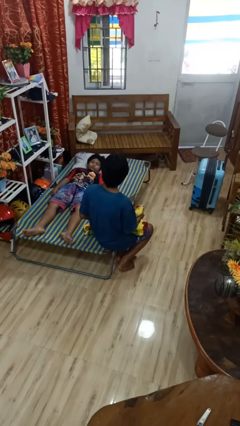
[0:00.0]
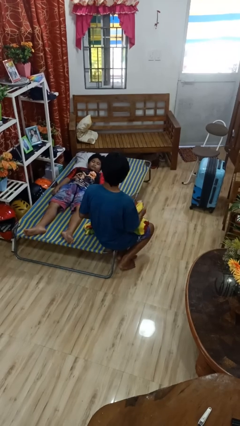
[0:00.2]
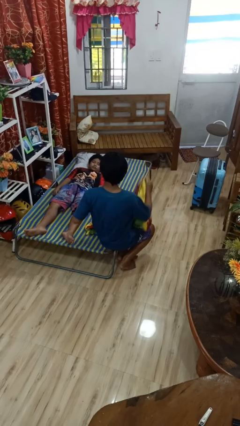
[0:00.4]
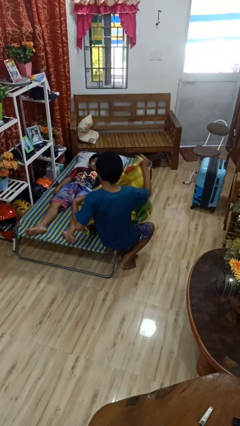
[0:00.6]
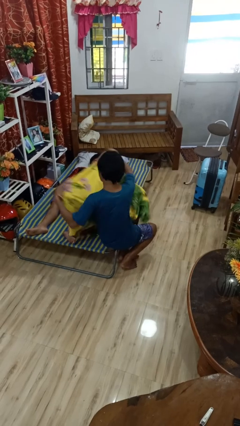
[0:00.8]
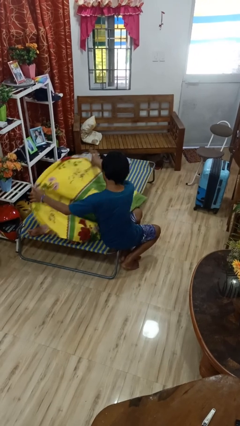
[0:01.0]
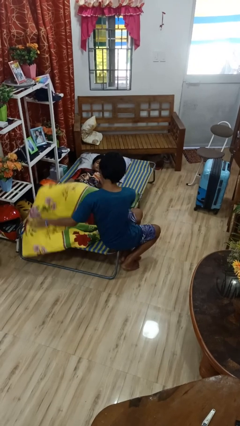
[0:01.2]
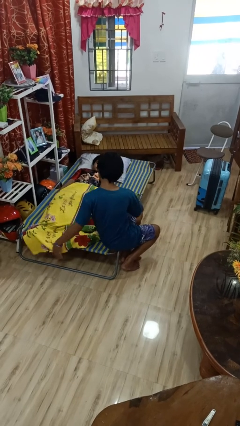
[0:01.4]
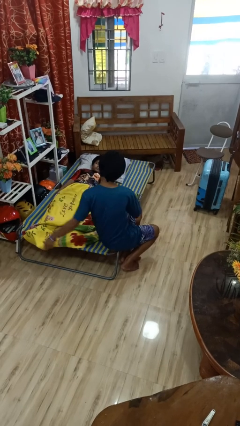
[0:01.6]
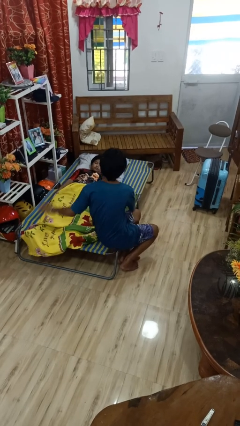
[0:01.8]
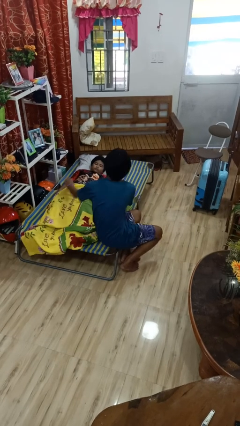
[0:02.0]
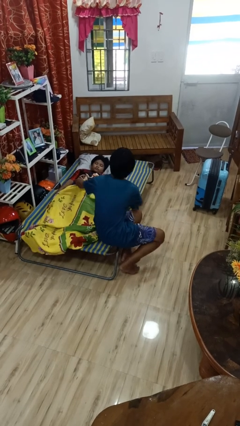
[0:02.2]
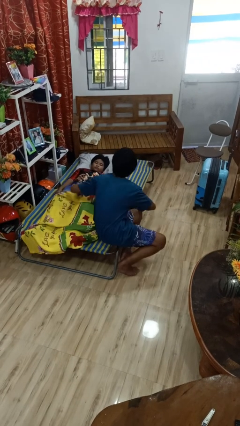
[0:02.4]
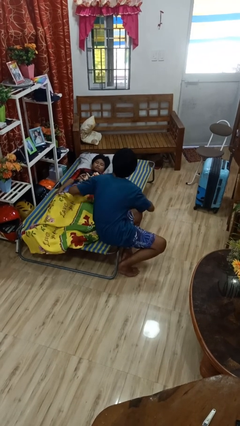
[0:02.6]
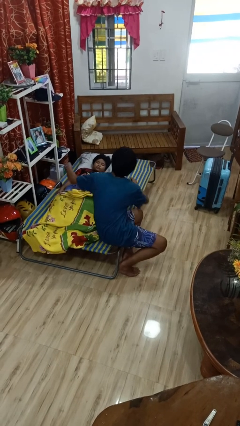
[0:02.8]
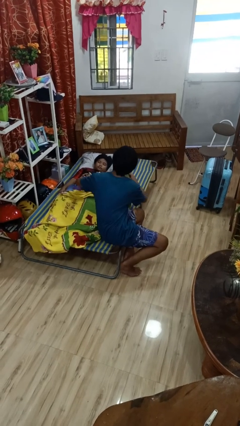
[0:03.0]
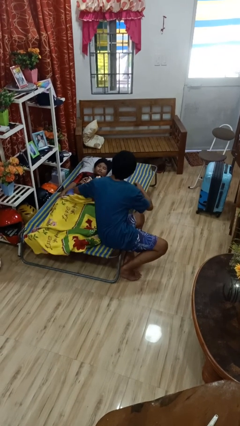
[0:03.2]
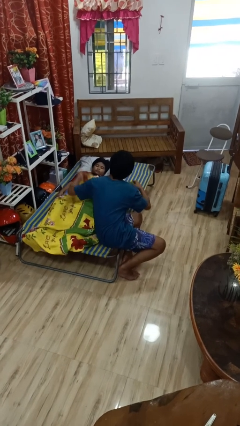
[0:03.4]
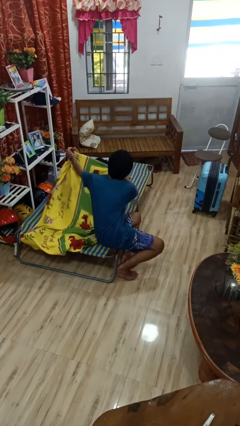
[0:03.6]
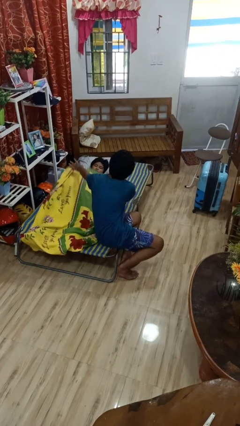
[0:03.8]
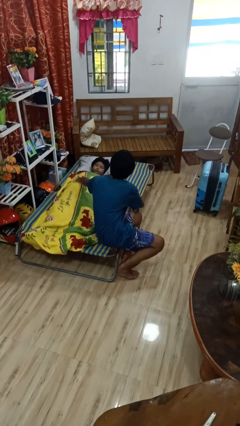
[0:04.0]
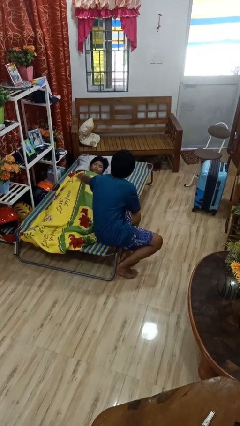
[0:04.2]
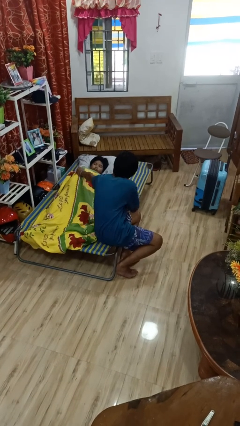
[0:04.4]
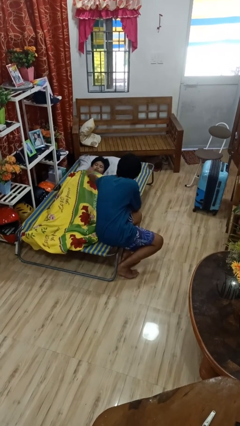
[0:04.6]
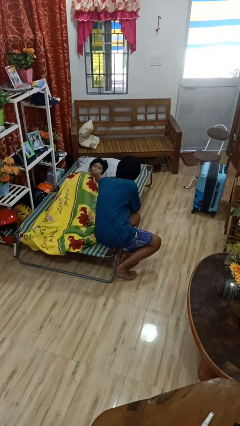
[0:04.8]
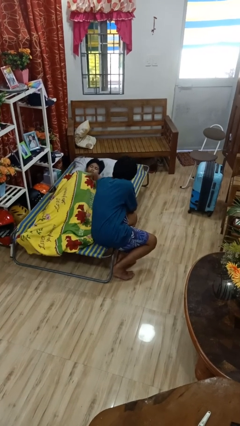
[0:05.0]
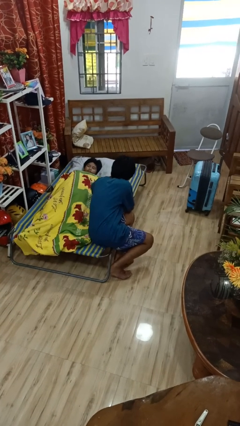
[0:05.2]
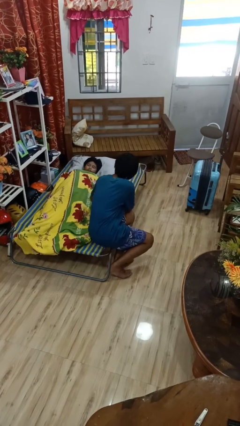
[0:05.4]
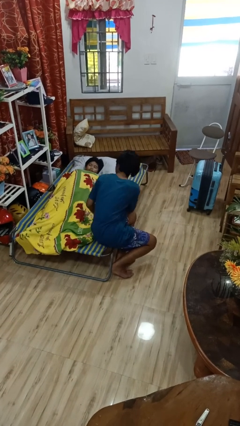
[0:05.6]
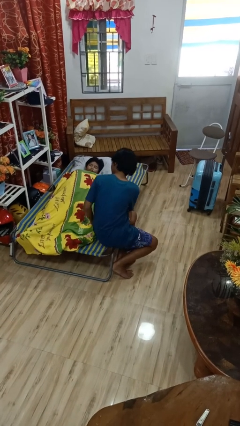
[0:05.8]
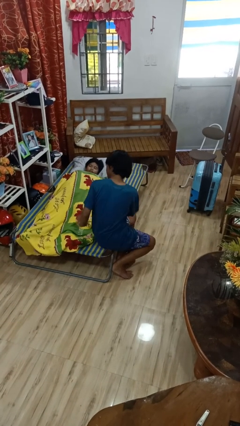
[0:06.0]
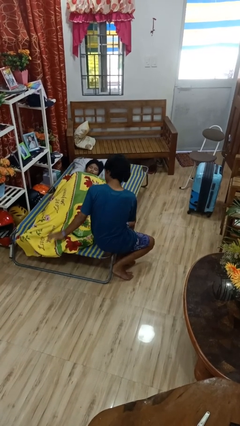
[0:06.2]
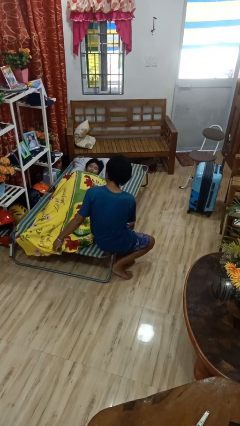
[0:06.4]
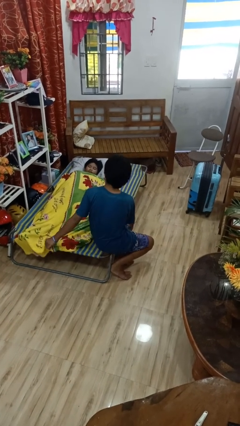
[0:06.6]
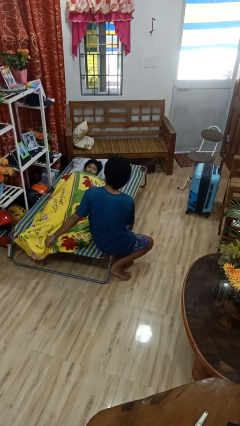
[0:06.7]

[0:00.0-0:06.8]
person covers friend with blanket

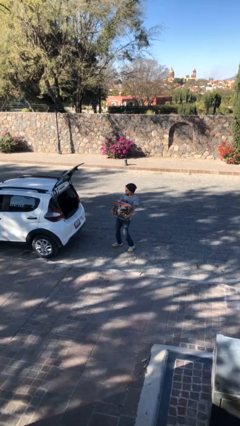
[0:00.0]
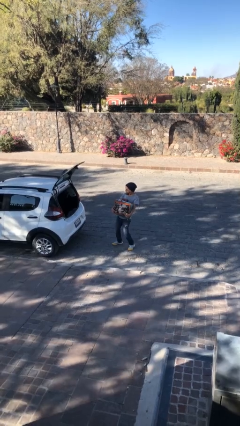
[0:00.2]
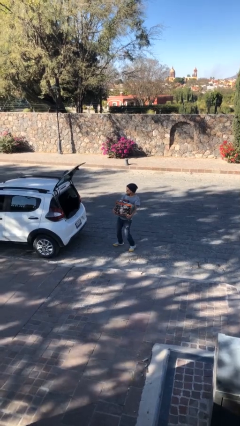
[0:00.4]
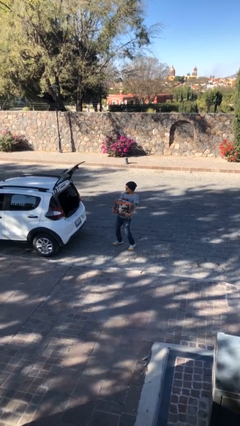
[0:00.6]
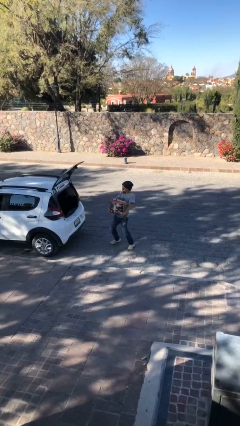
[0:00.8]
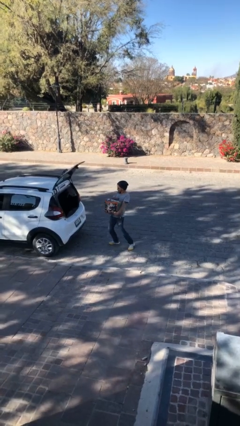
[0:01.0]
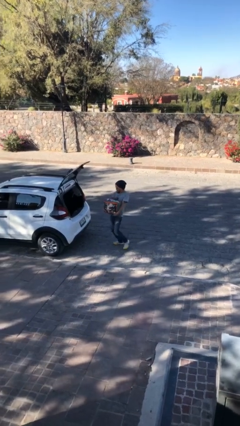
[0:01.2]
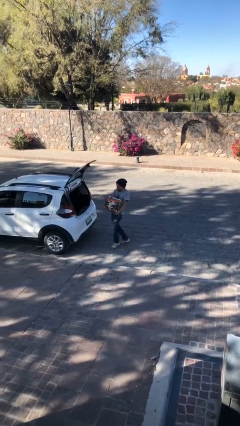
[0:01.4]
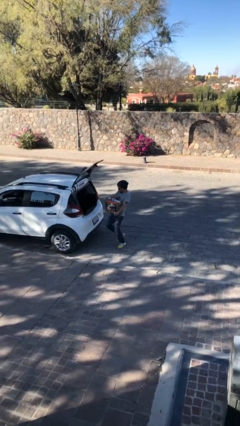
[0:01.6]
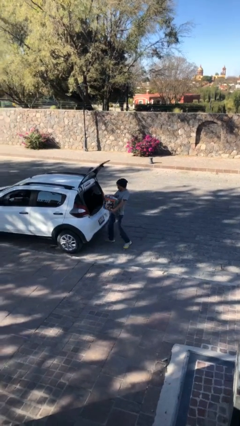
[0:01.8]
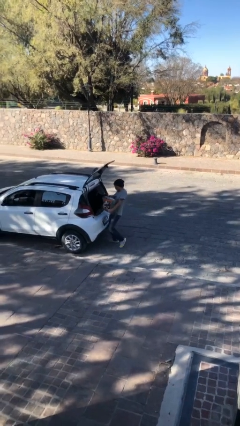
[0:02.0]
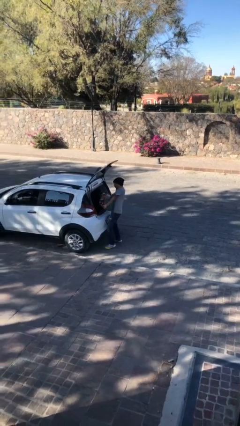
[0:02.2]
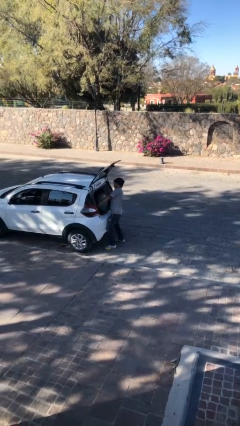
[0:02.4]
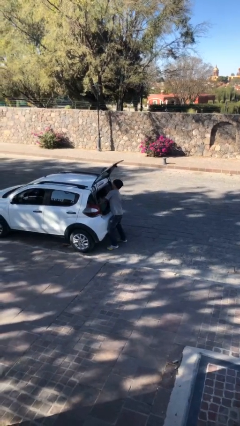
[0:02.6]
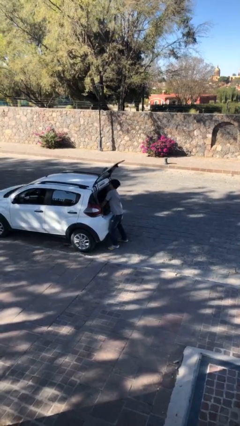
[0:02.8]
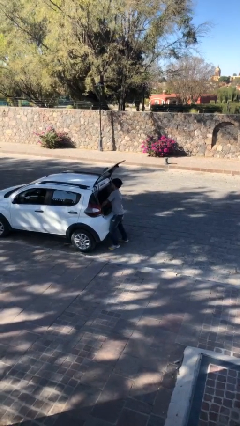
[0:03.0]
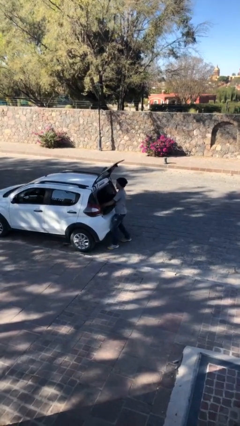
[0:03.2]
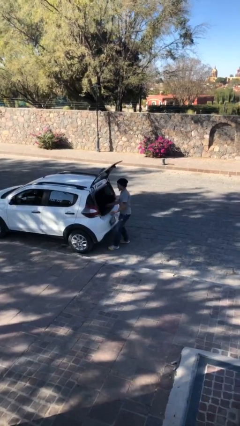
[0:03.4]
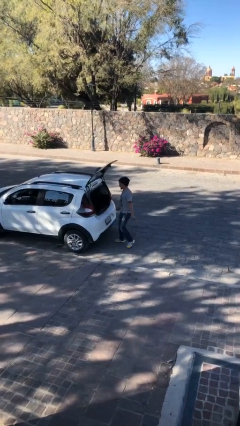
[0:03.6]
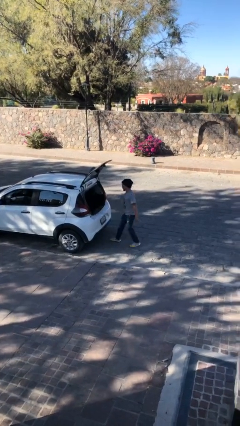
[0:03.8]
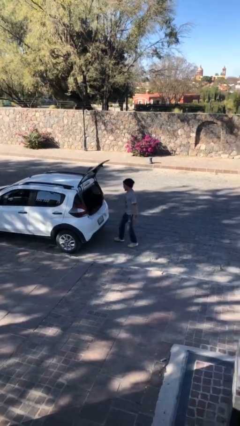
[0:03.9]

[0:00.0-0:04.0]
person loads car

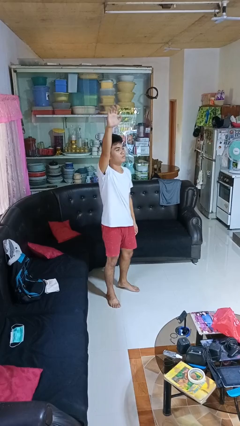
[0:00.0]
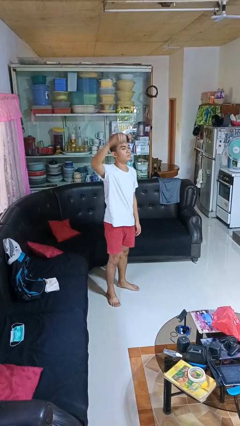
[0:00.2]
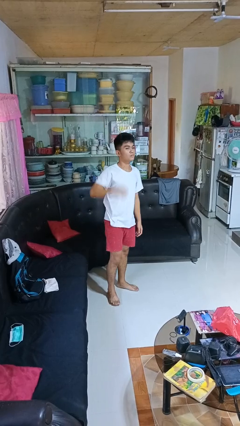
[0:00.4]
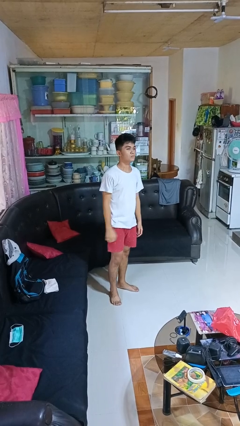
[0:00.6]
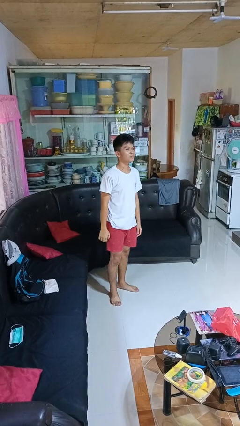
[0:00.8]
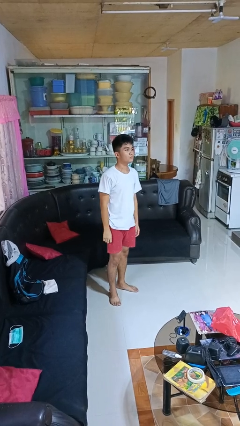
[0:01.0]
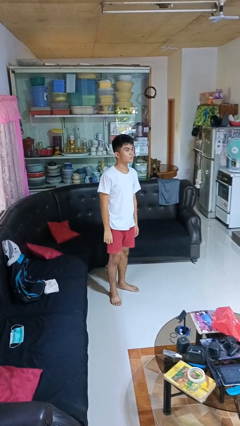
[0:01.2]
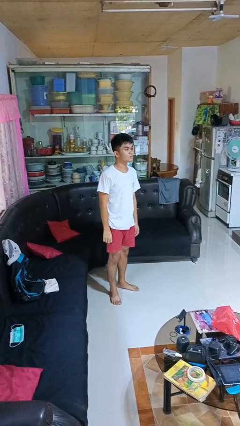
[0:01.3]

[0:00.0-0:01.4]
person gestures lower hand

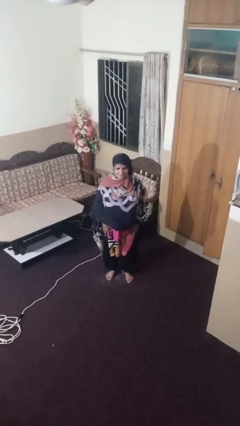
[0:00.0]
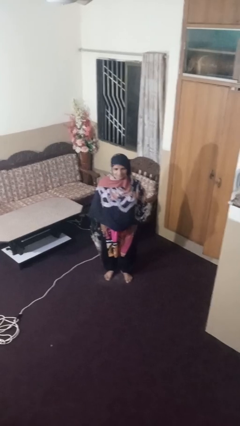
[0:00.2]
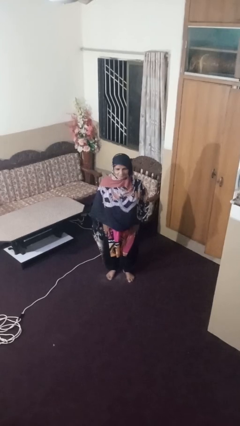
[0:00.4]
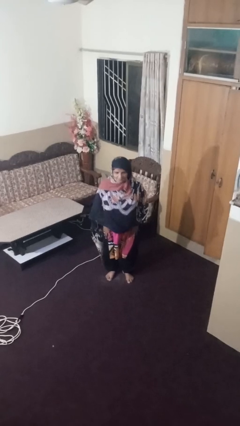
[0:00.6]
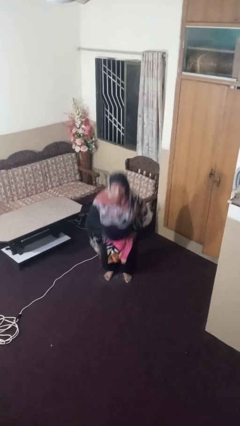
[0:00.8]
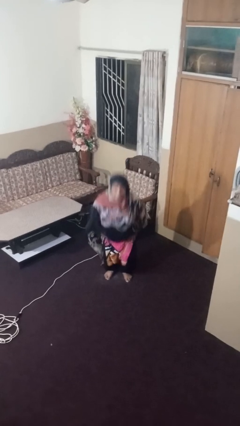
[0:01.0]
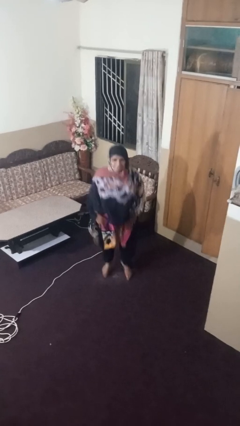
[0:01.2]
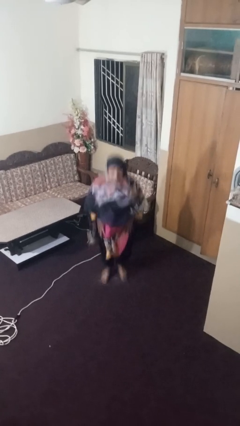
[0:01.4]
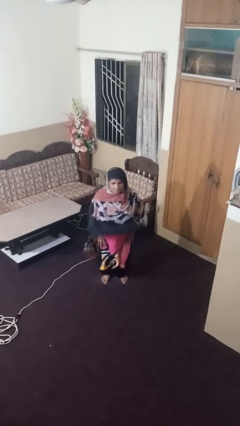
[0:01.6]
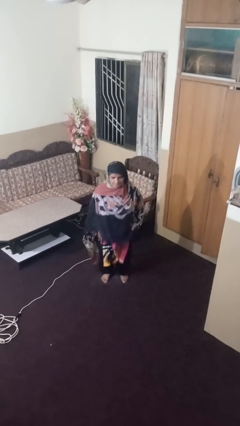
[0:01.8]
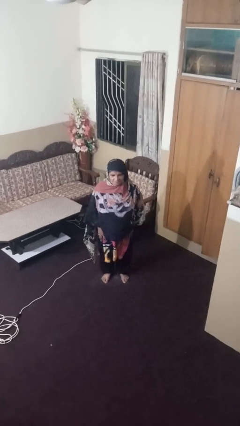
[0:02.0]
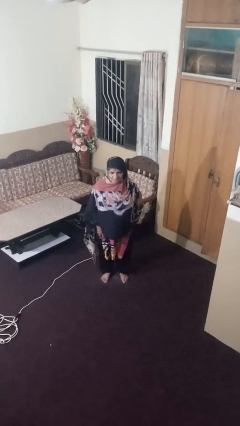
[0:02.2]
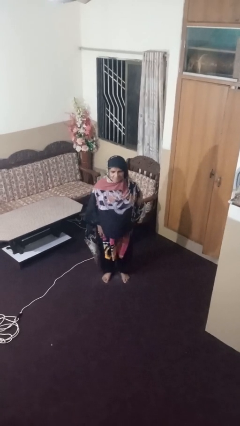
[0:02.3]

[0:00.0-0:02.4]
person jumps

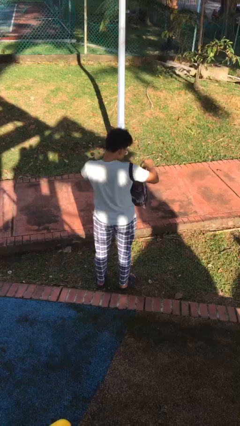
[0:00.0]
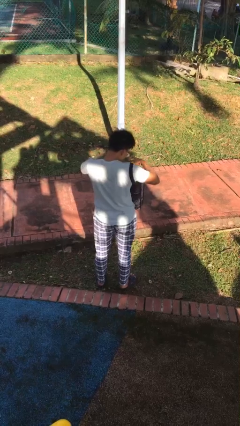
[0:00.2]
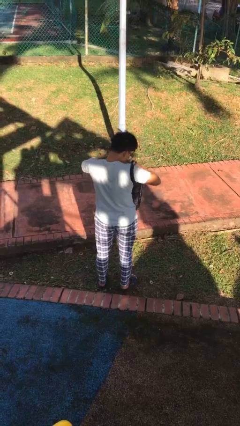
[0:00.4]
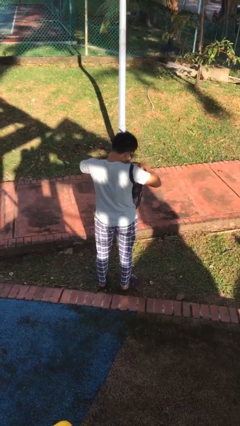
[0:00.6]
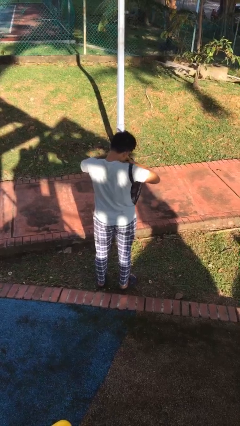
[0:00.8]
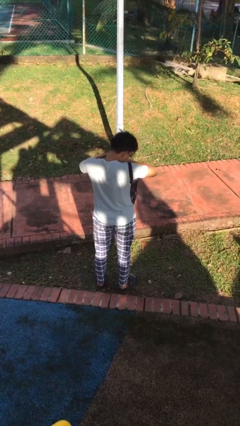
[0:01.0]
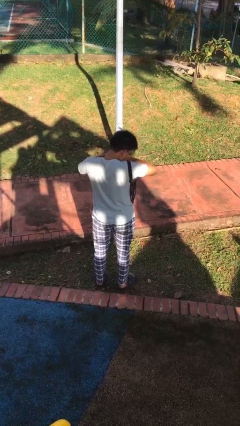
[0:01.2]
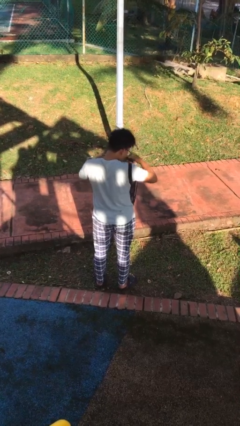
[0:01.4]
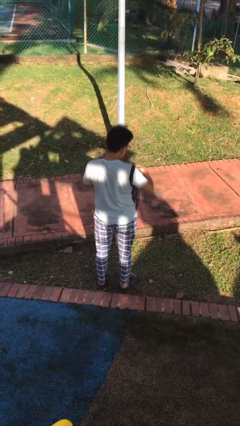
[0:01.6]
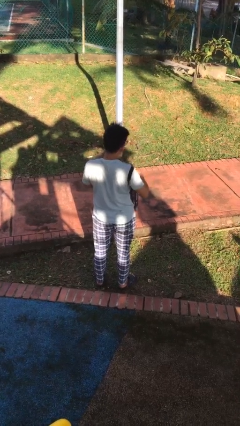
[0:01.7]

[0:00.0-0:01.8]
person searches in bag

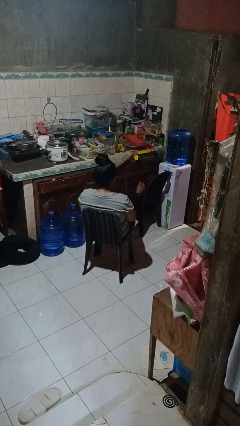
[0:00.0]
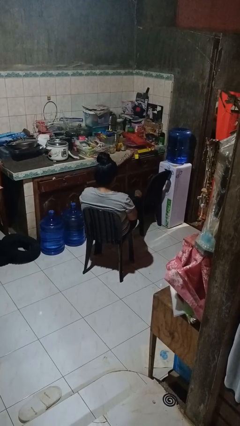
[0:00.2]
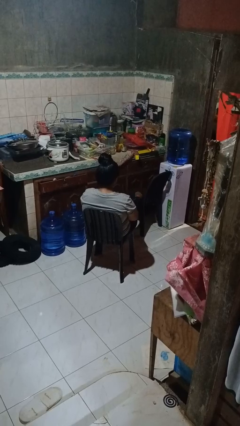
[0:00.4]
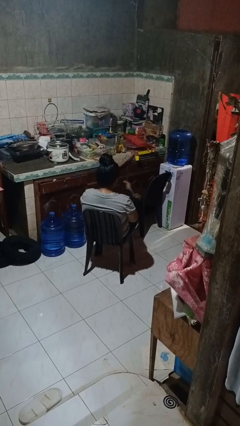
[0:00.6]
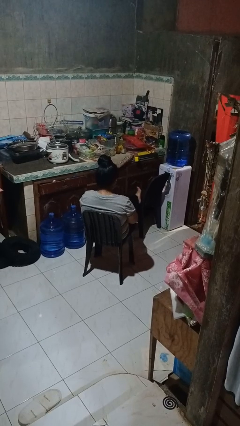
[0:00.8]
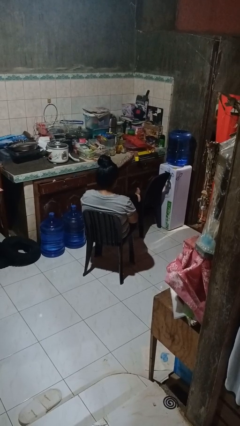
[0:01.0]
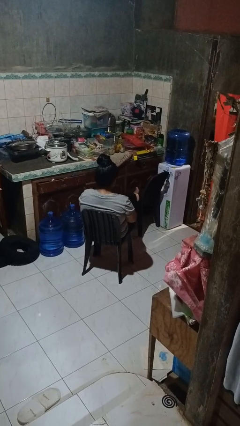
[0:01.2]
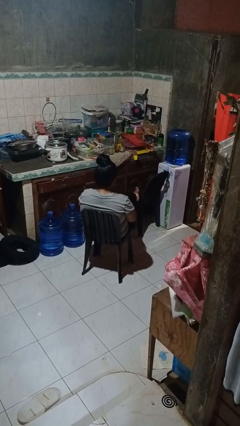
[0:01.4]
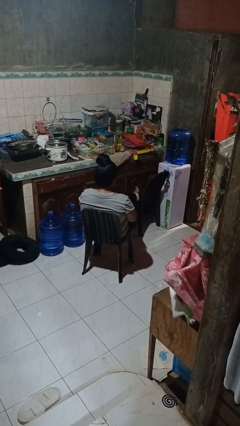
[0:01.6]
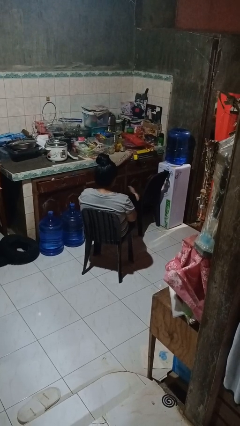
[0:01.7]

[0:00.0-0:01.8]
person puts feet up
